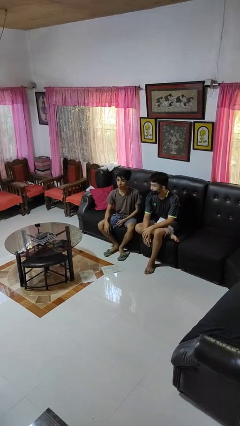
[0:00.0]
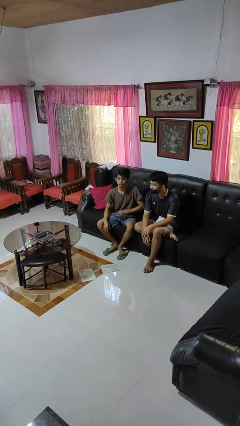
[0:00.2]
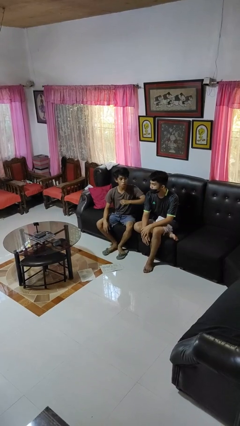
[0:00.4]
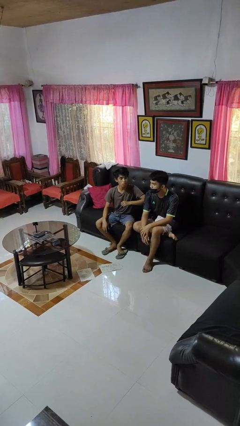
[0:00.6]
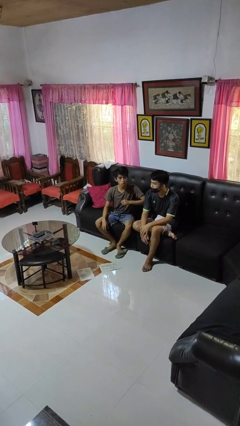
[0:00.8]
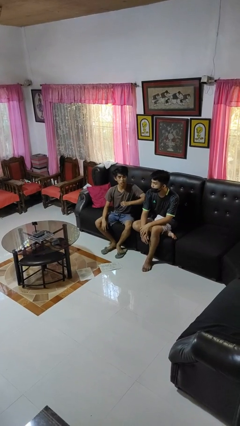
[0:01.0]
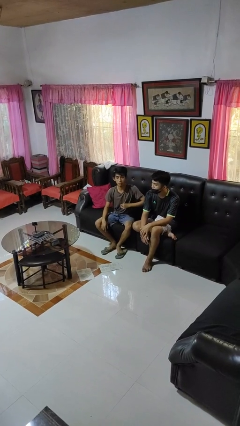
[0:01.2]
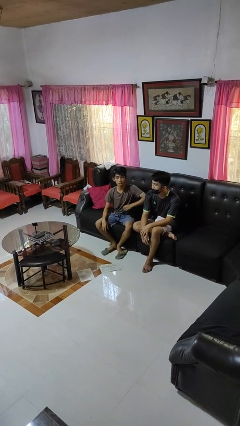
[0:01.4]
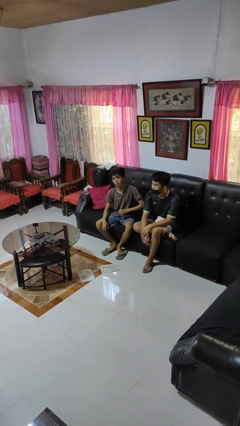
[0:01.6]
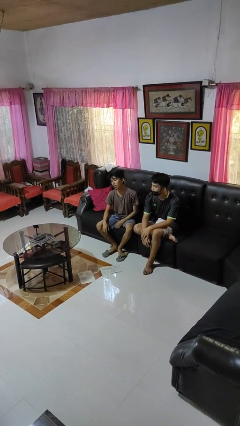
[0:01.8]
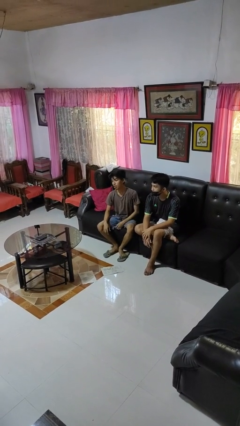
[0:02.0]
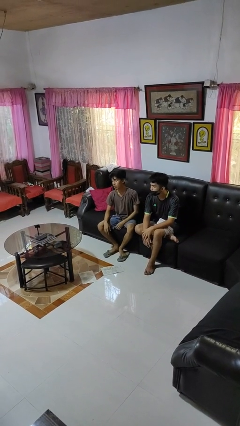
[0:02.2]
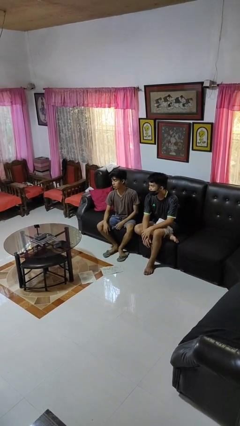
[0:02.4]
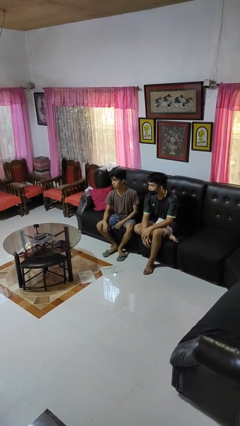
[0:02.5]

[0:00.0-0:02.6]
person nudges person with elbow

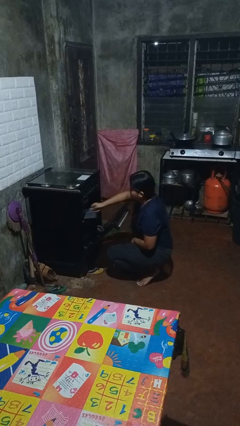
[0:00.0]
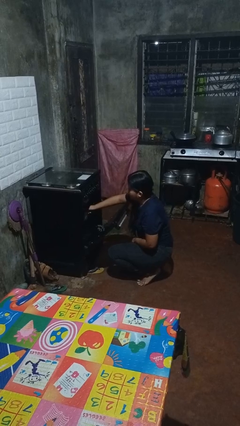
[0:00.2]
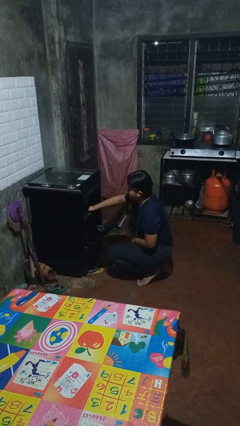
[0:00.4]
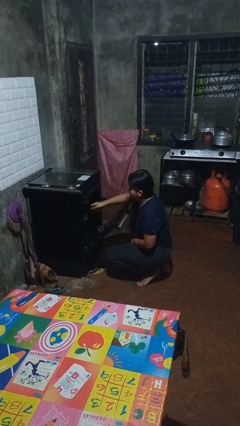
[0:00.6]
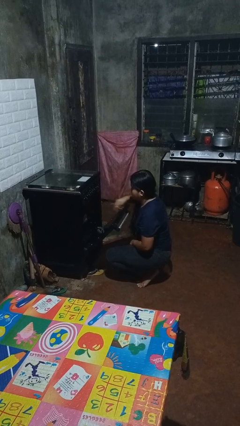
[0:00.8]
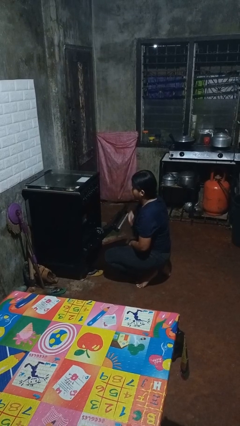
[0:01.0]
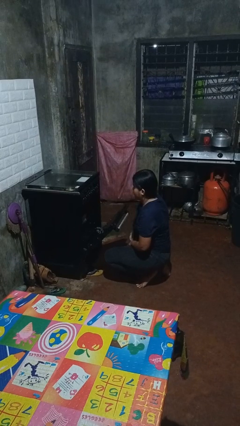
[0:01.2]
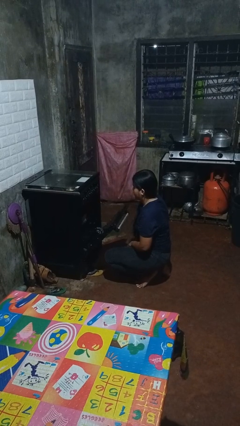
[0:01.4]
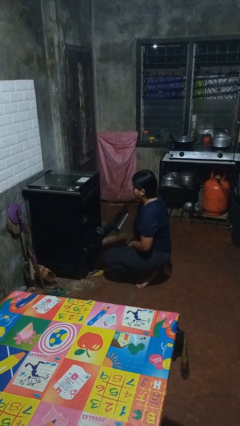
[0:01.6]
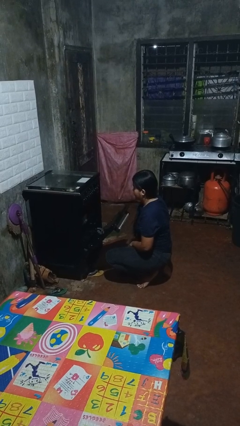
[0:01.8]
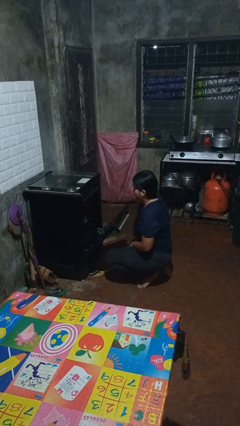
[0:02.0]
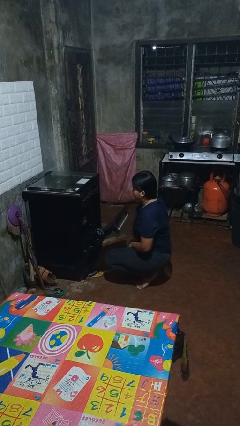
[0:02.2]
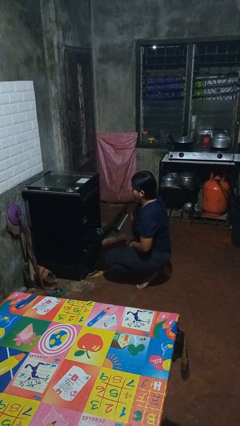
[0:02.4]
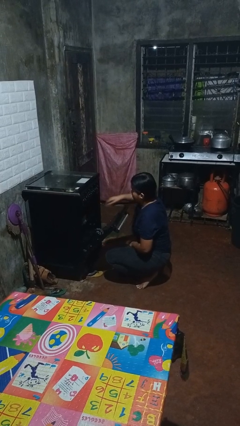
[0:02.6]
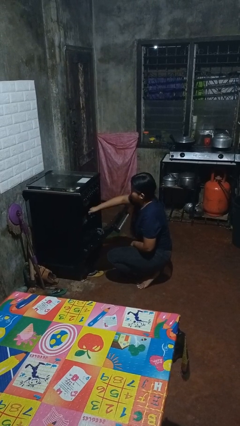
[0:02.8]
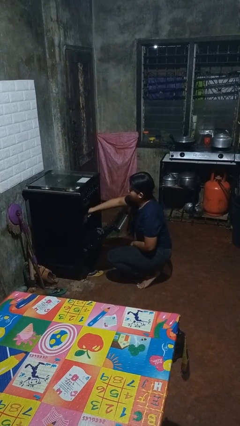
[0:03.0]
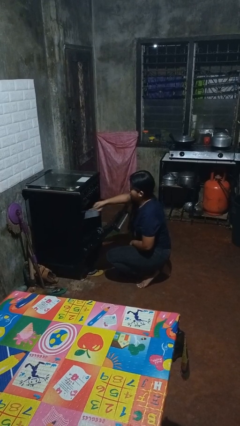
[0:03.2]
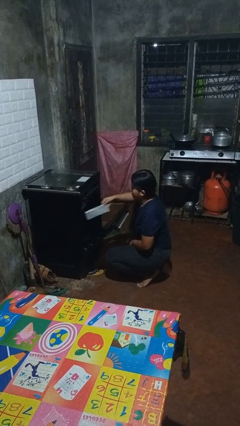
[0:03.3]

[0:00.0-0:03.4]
person puts object into oven

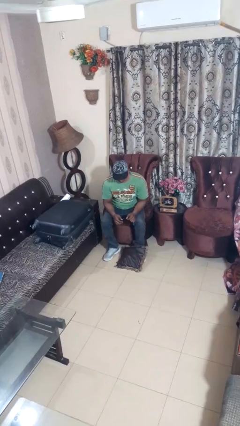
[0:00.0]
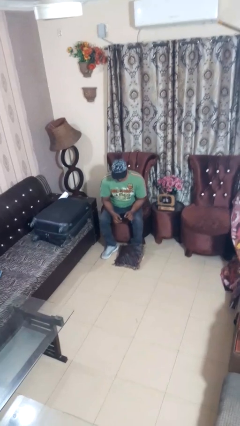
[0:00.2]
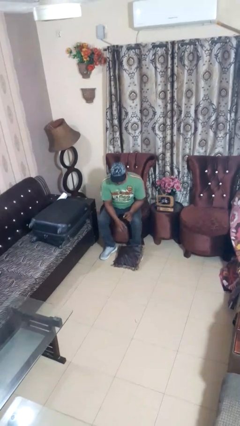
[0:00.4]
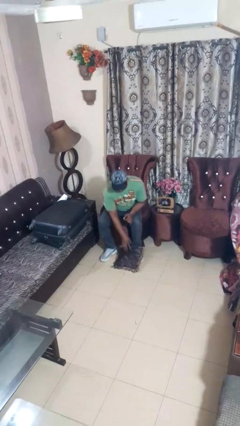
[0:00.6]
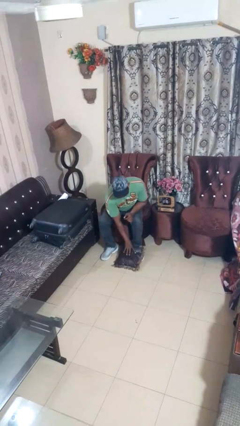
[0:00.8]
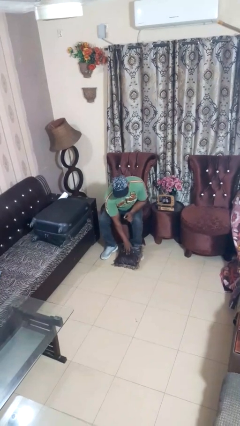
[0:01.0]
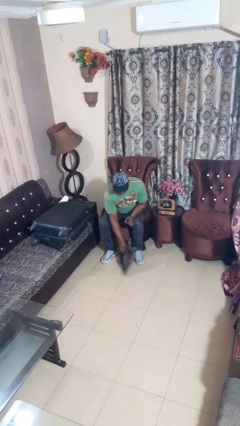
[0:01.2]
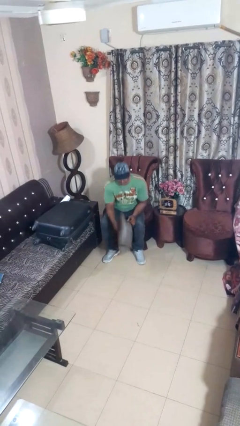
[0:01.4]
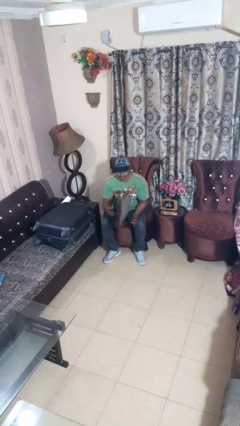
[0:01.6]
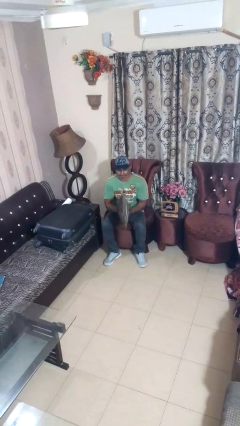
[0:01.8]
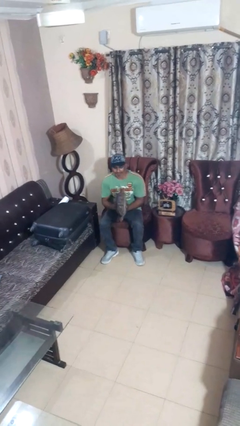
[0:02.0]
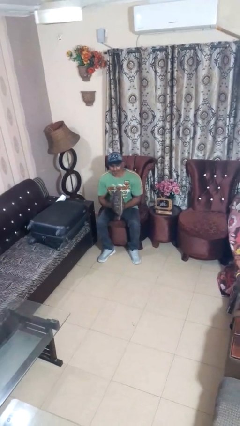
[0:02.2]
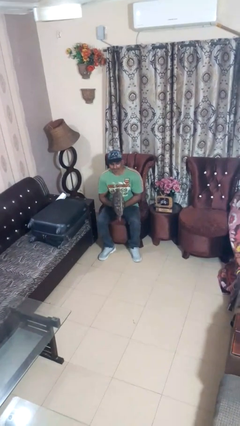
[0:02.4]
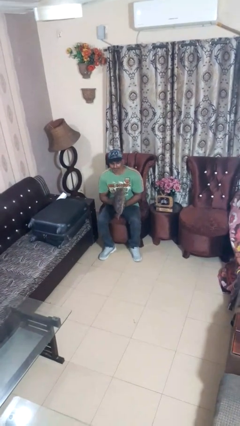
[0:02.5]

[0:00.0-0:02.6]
person picks up object from floor

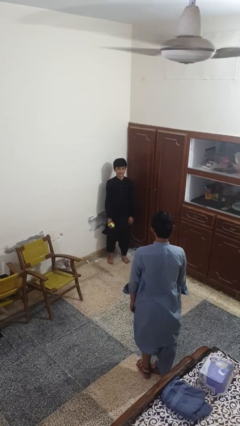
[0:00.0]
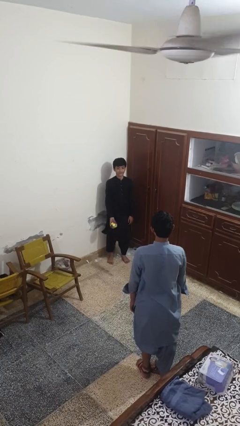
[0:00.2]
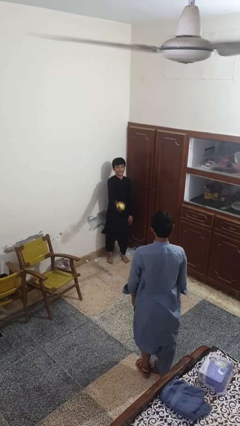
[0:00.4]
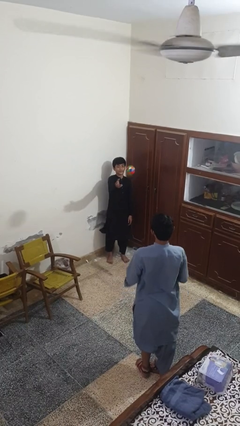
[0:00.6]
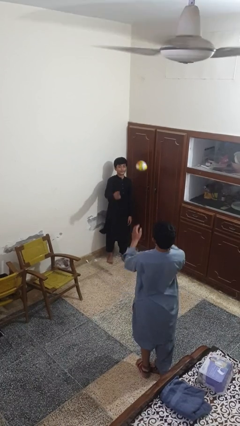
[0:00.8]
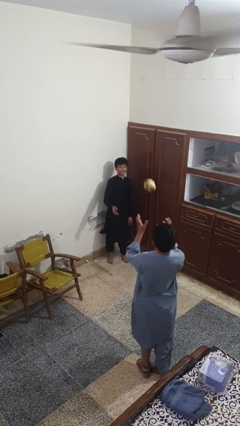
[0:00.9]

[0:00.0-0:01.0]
person throws object to person

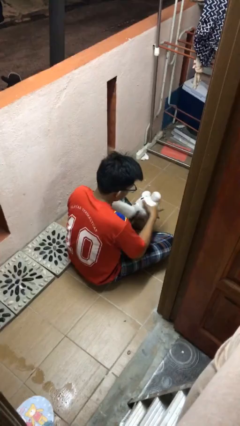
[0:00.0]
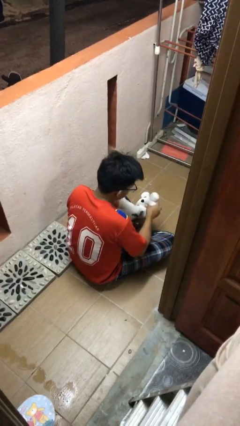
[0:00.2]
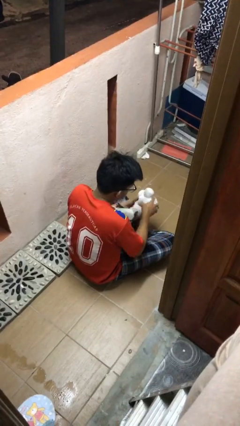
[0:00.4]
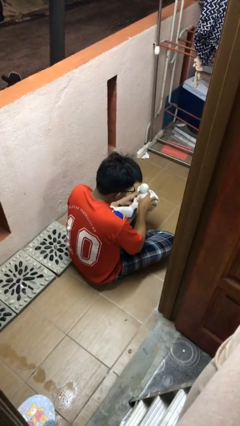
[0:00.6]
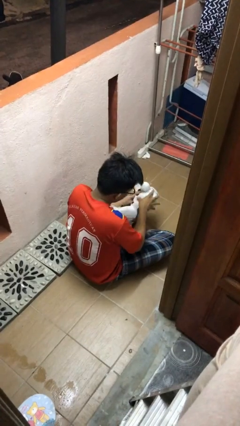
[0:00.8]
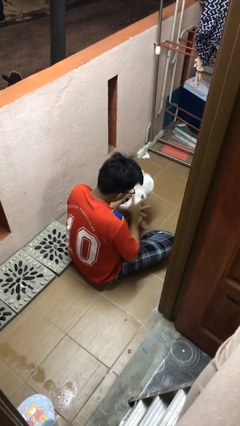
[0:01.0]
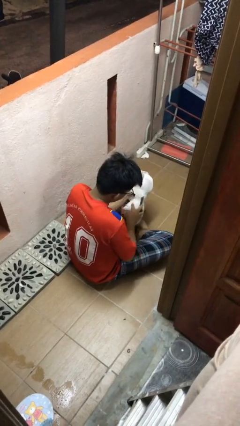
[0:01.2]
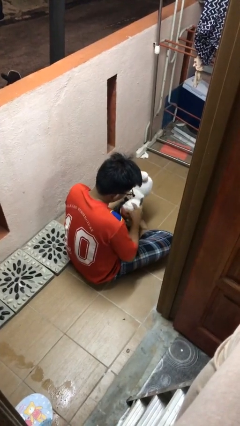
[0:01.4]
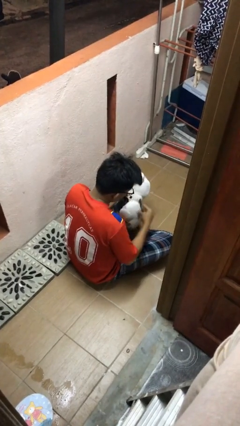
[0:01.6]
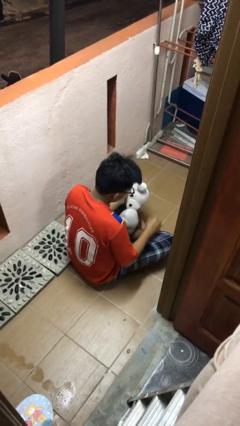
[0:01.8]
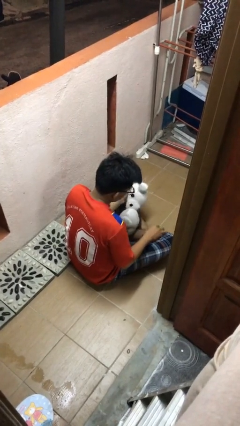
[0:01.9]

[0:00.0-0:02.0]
person squeezes object

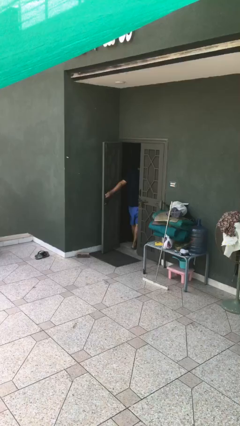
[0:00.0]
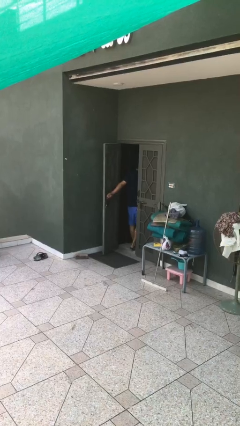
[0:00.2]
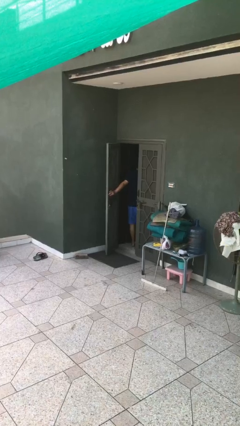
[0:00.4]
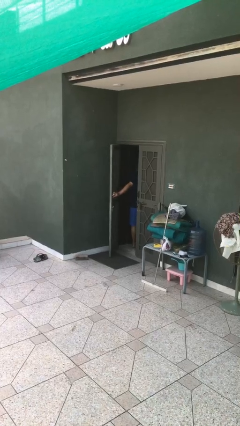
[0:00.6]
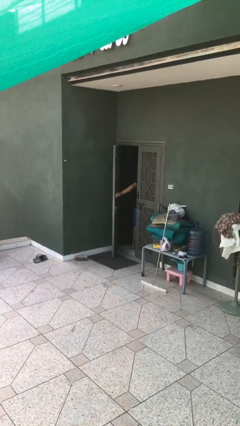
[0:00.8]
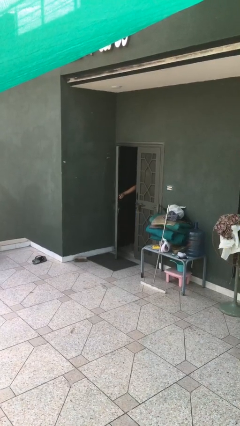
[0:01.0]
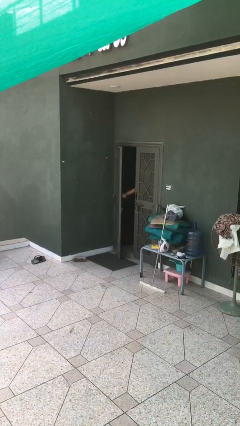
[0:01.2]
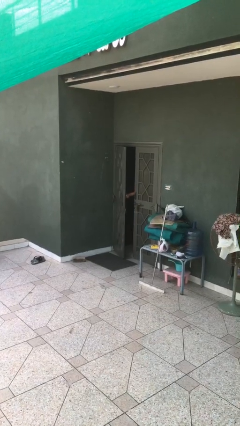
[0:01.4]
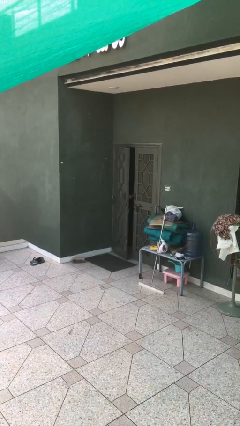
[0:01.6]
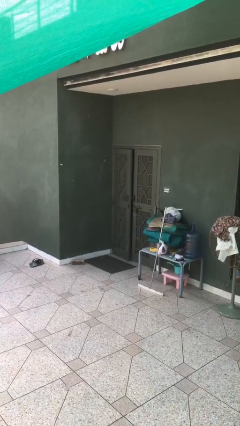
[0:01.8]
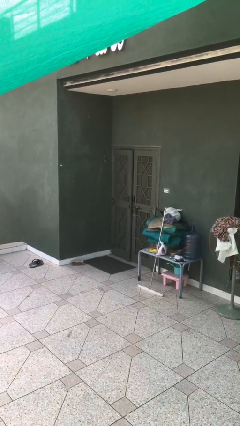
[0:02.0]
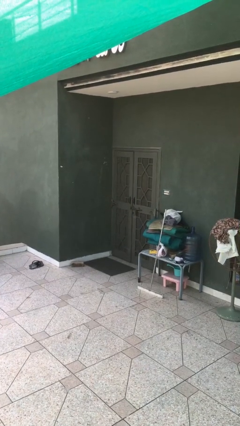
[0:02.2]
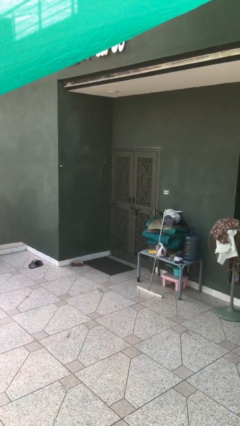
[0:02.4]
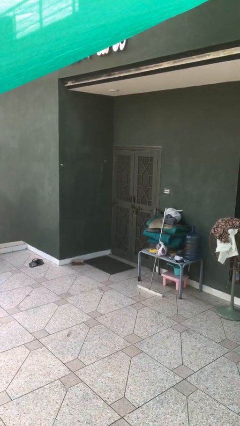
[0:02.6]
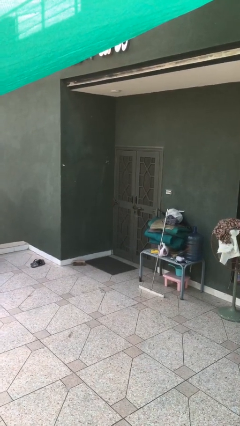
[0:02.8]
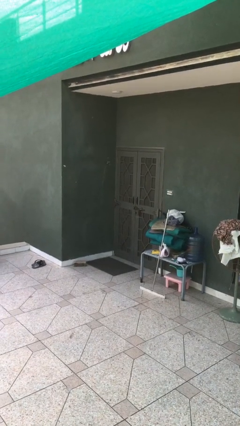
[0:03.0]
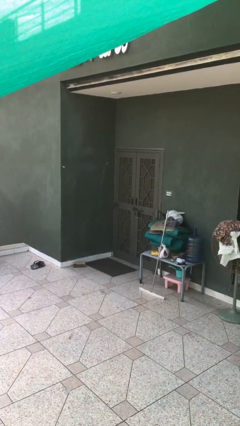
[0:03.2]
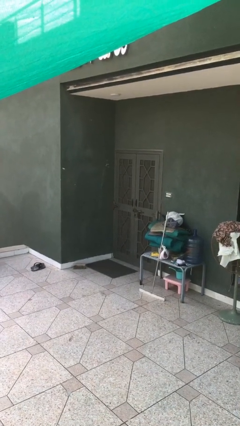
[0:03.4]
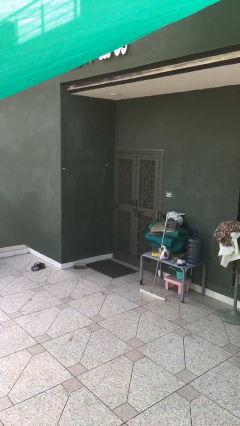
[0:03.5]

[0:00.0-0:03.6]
person closes facility door

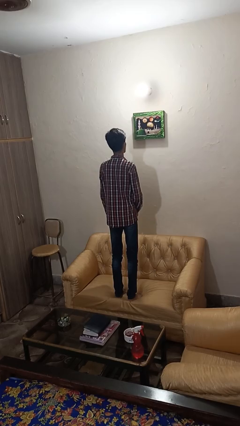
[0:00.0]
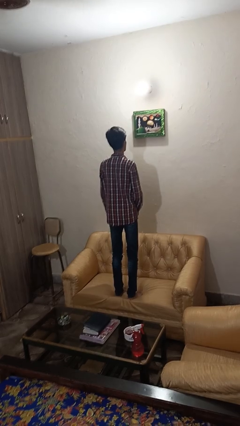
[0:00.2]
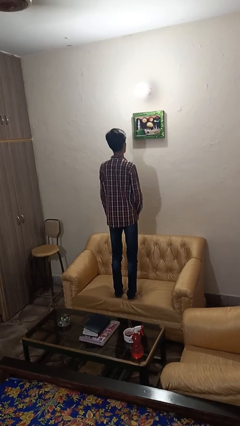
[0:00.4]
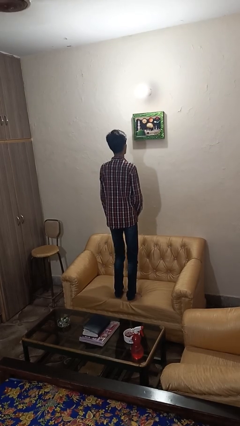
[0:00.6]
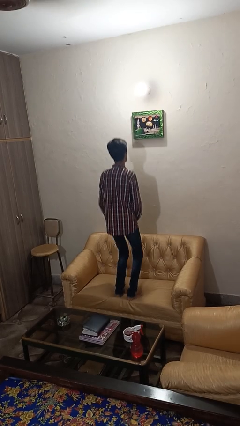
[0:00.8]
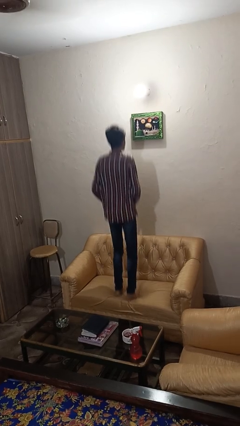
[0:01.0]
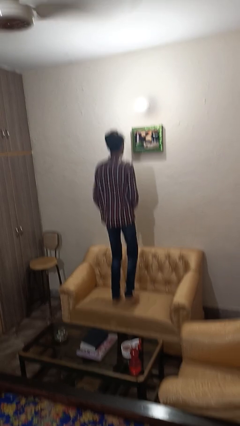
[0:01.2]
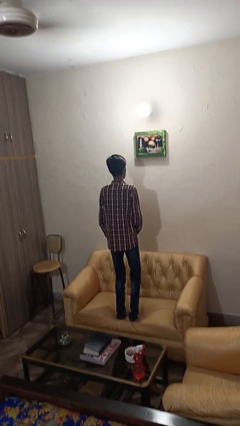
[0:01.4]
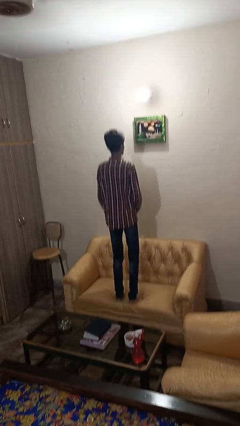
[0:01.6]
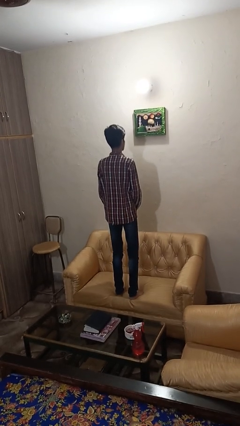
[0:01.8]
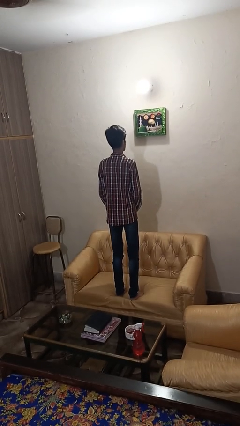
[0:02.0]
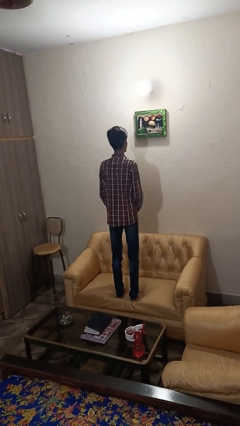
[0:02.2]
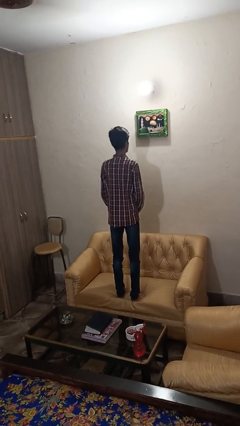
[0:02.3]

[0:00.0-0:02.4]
person jumps on couch
